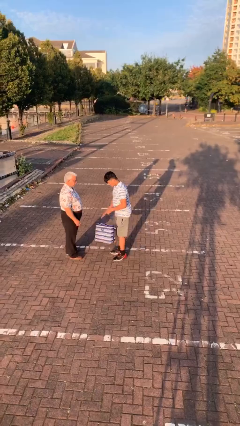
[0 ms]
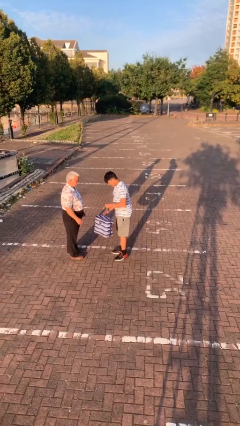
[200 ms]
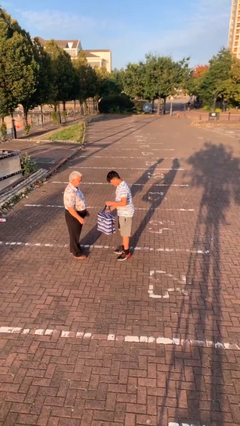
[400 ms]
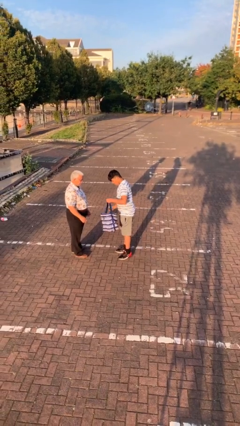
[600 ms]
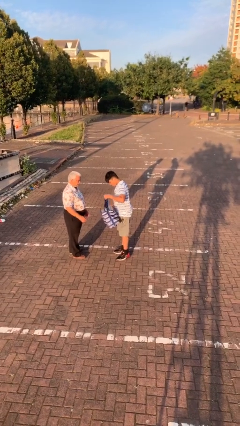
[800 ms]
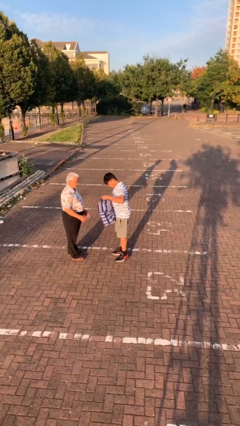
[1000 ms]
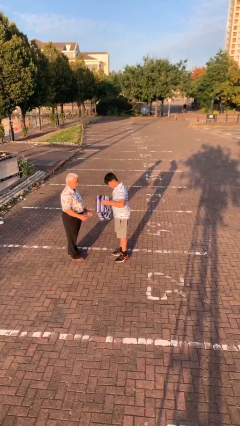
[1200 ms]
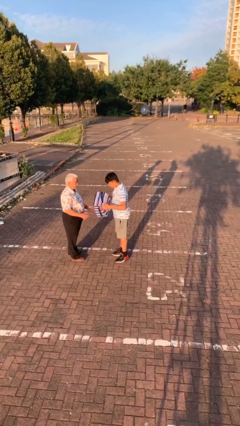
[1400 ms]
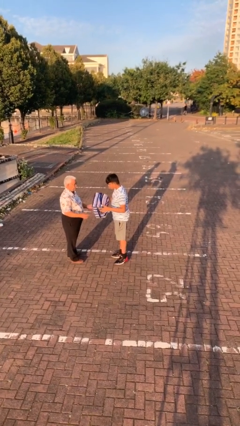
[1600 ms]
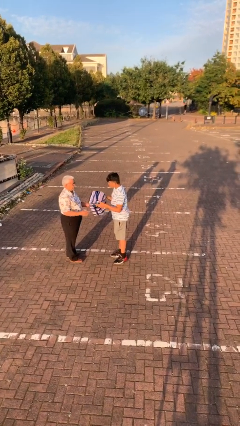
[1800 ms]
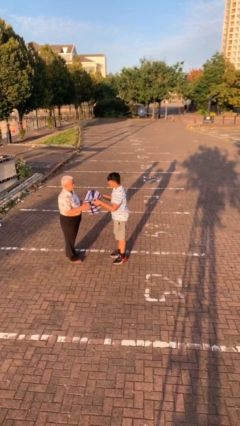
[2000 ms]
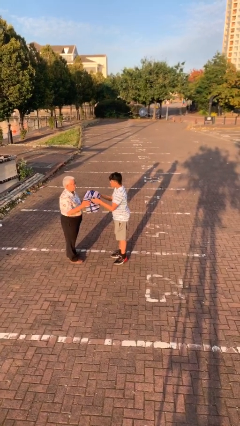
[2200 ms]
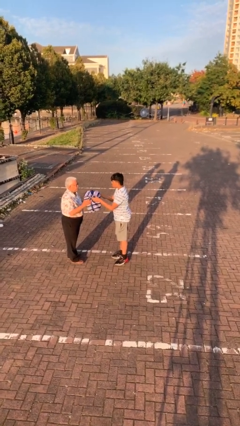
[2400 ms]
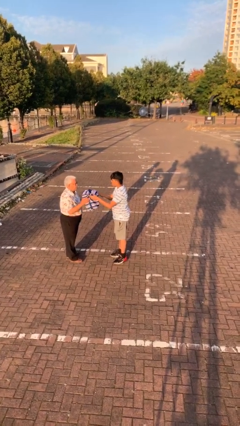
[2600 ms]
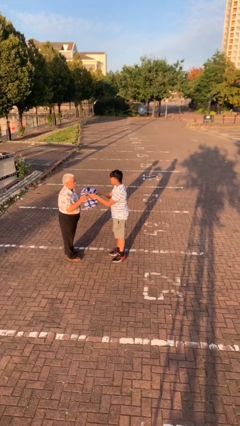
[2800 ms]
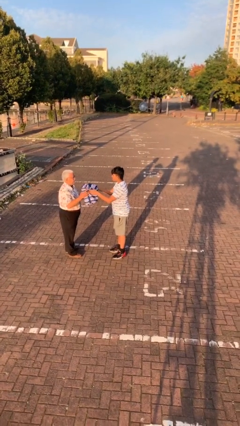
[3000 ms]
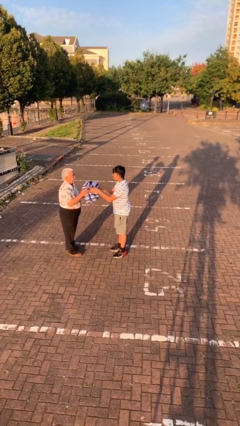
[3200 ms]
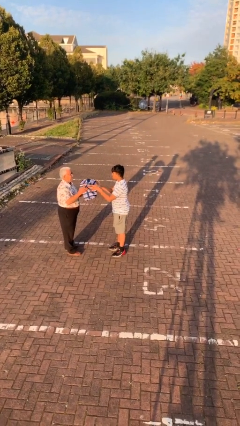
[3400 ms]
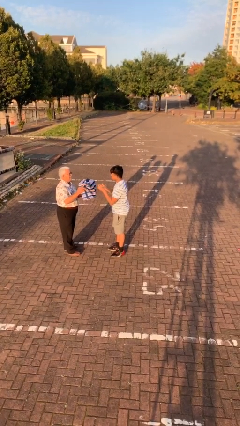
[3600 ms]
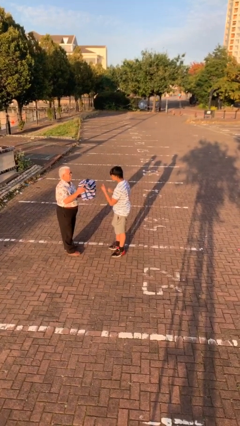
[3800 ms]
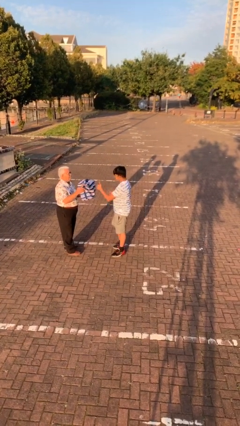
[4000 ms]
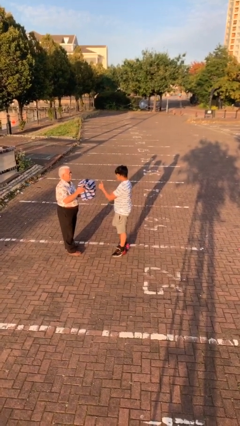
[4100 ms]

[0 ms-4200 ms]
person transfers object to person

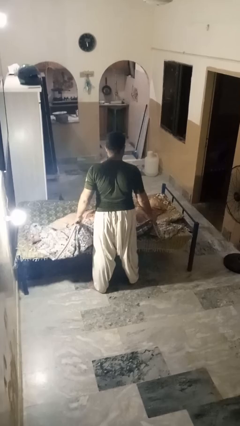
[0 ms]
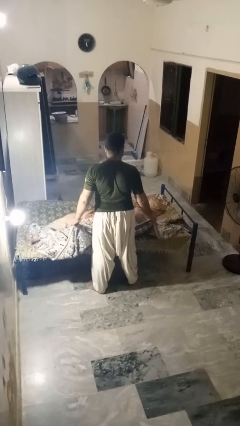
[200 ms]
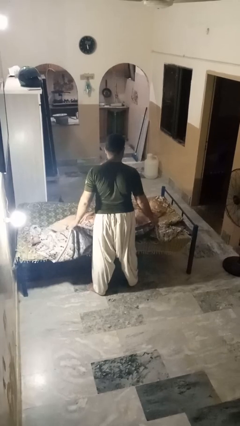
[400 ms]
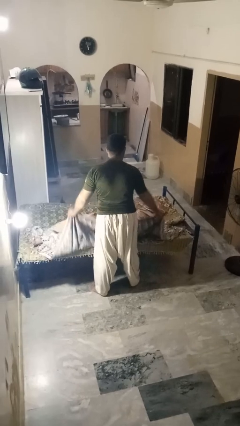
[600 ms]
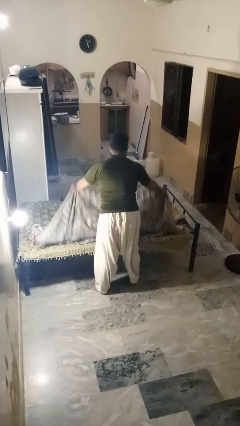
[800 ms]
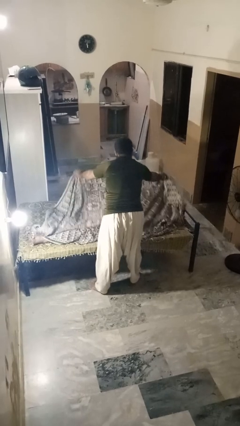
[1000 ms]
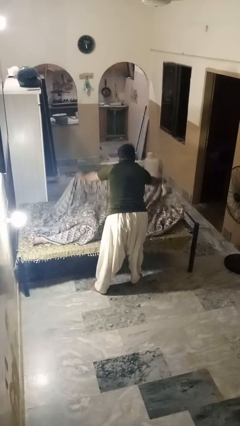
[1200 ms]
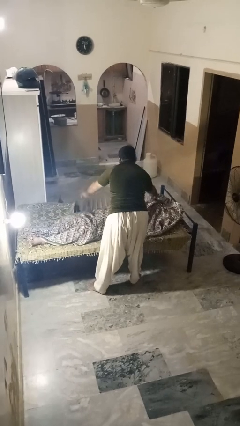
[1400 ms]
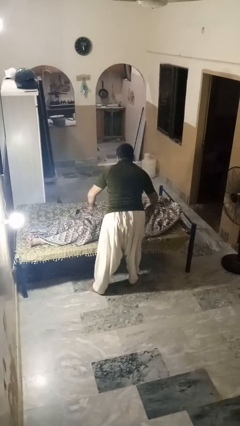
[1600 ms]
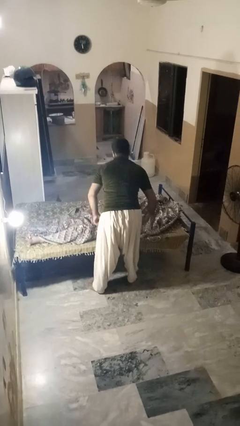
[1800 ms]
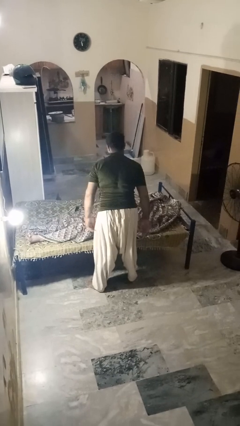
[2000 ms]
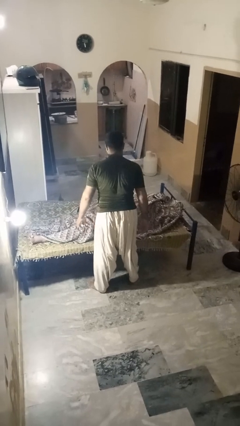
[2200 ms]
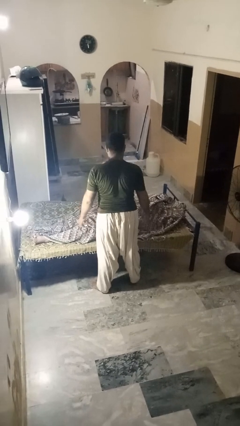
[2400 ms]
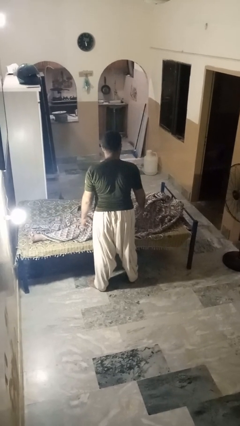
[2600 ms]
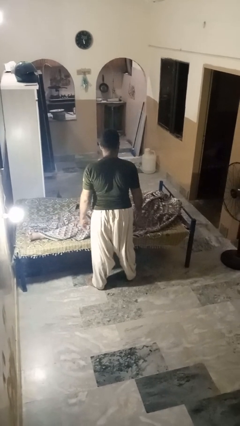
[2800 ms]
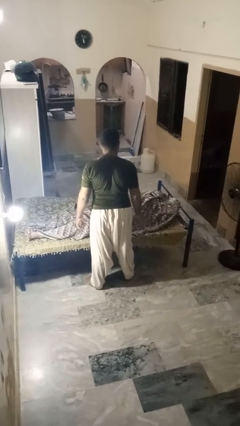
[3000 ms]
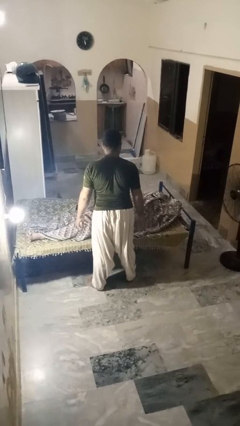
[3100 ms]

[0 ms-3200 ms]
person covers friend with blanket

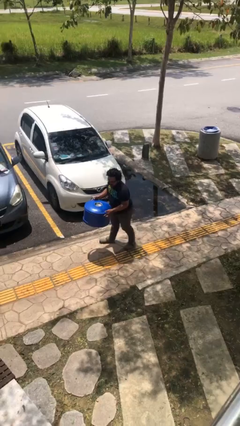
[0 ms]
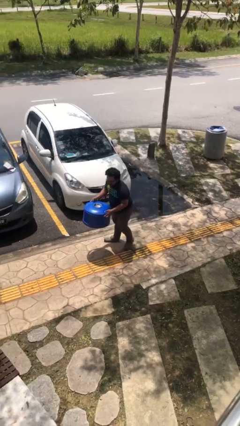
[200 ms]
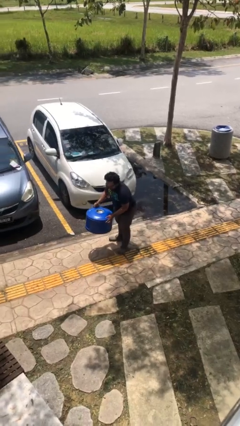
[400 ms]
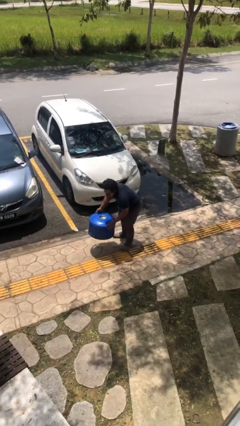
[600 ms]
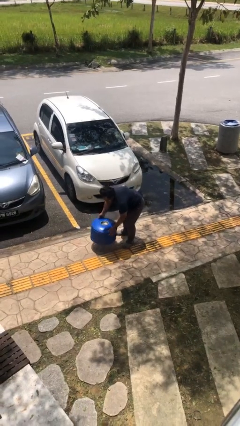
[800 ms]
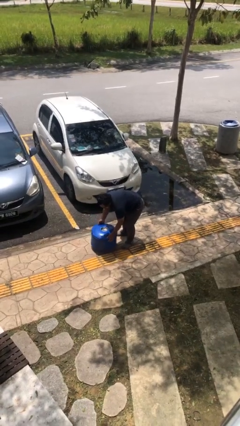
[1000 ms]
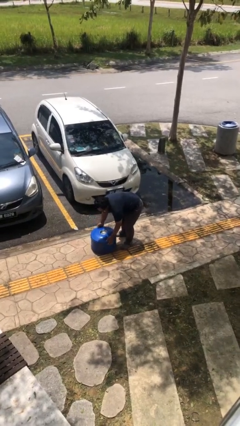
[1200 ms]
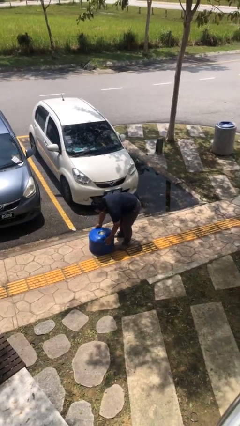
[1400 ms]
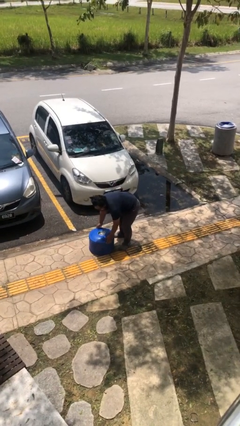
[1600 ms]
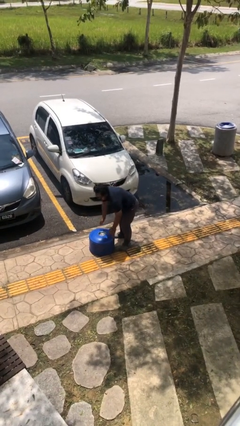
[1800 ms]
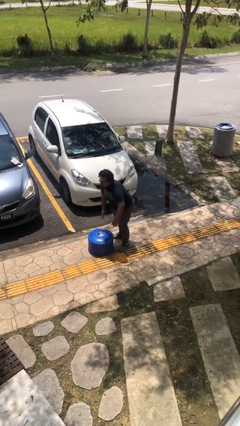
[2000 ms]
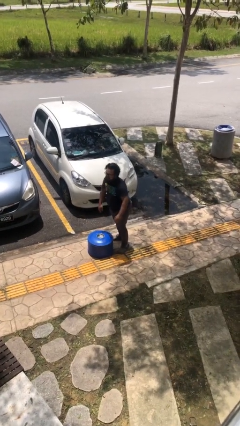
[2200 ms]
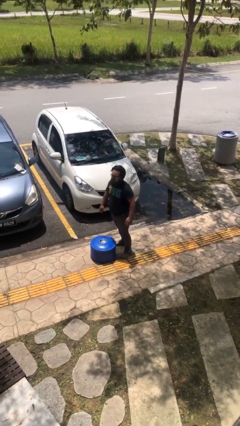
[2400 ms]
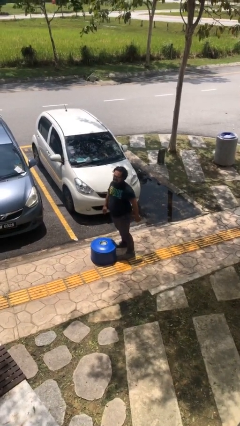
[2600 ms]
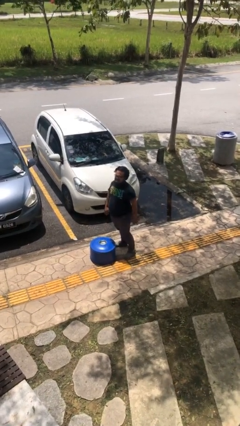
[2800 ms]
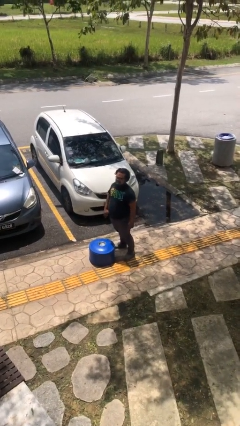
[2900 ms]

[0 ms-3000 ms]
person puts down object on floor

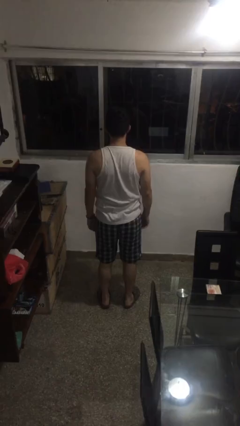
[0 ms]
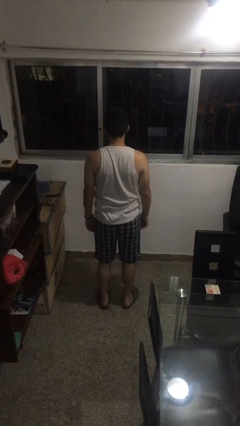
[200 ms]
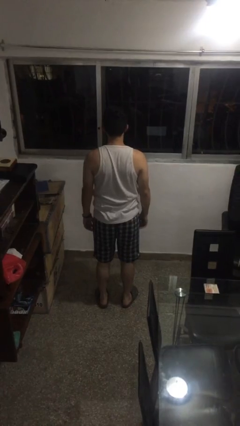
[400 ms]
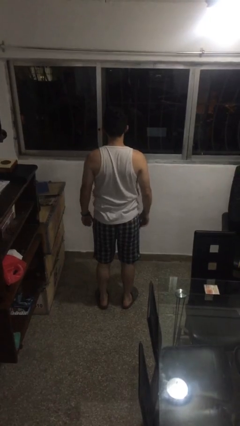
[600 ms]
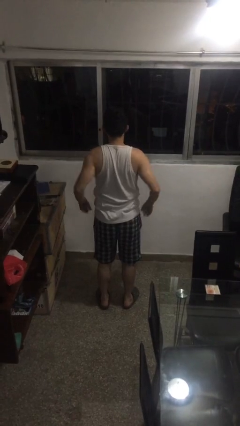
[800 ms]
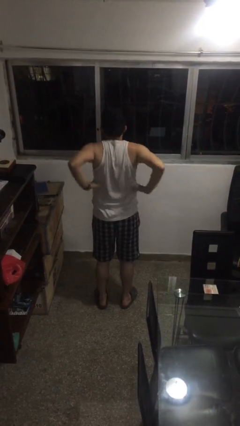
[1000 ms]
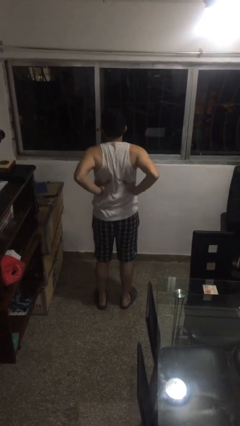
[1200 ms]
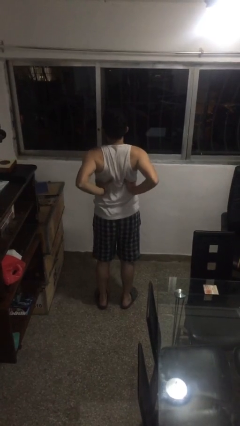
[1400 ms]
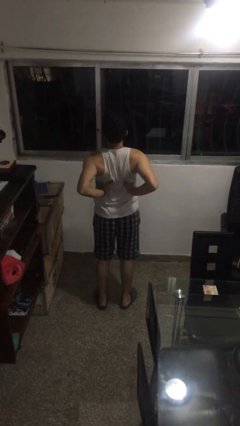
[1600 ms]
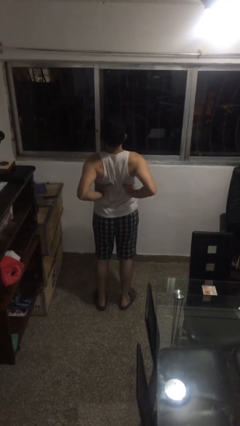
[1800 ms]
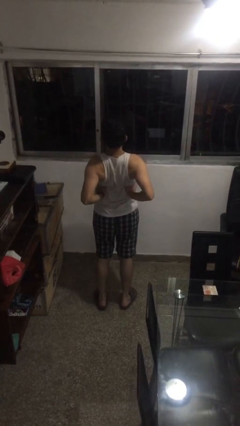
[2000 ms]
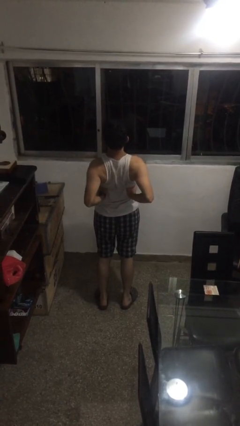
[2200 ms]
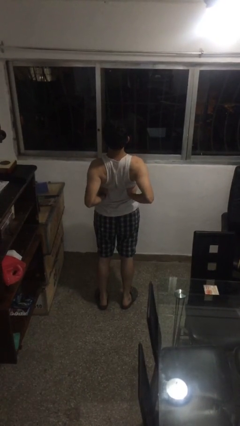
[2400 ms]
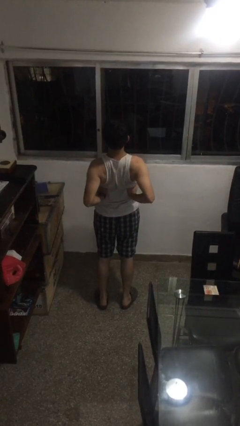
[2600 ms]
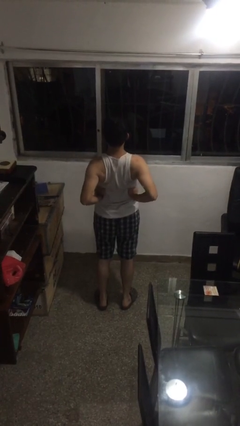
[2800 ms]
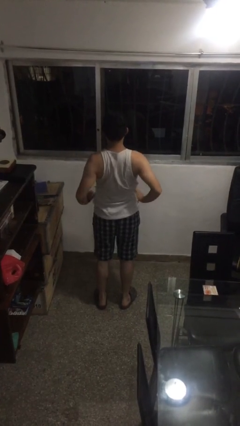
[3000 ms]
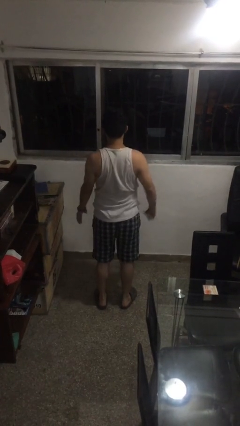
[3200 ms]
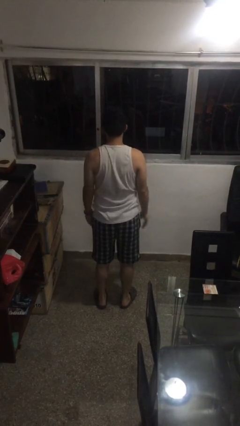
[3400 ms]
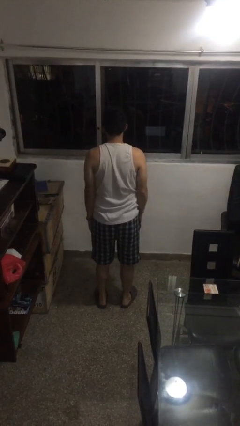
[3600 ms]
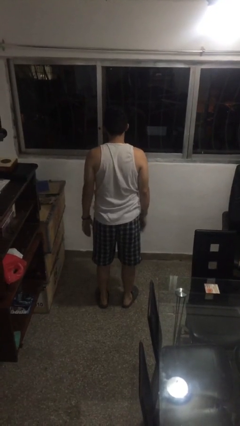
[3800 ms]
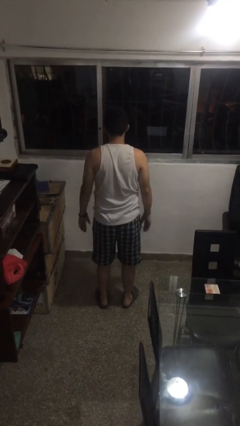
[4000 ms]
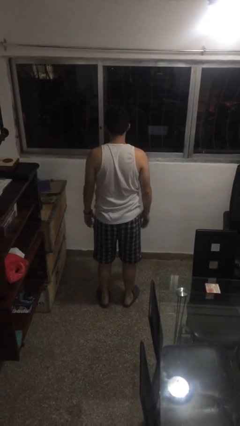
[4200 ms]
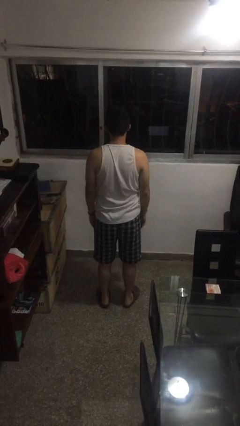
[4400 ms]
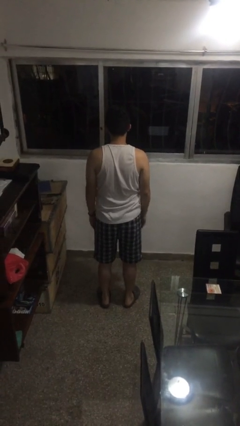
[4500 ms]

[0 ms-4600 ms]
person stretches back

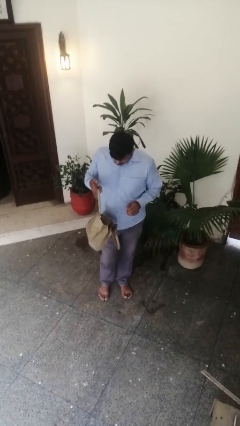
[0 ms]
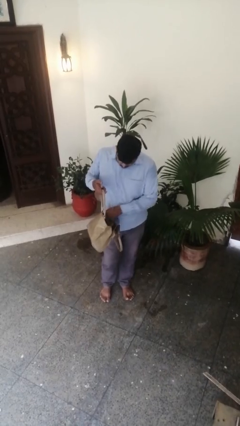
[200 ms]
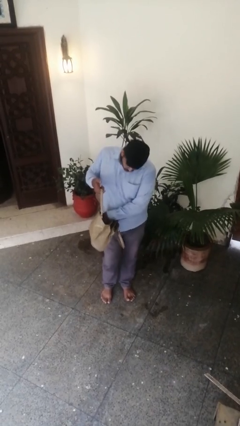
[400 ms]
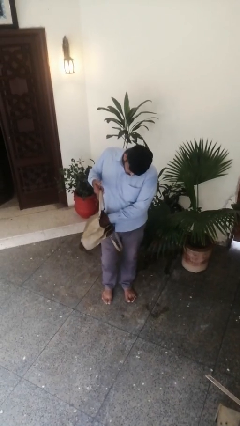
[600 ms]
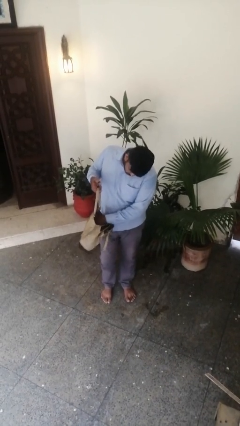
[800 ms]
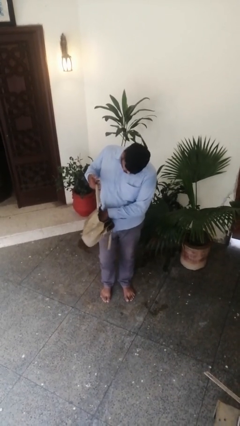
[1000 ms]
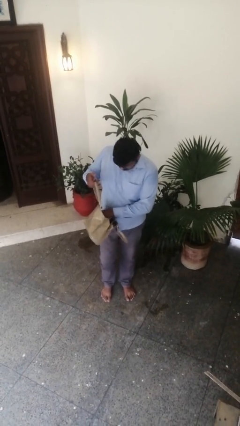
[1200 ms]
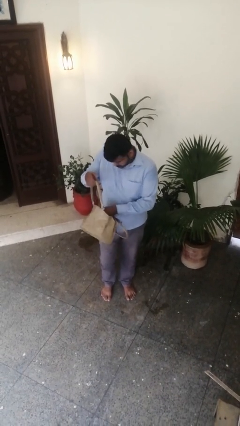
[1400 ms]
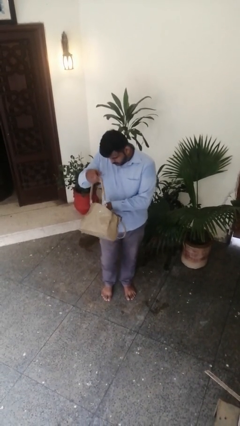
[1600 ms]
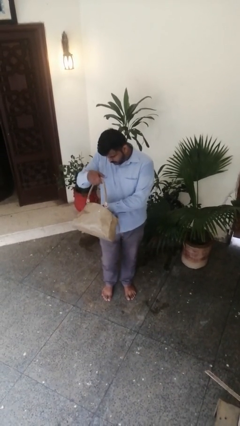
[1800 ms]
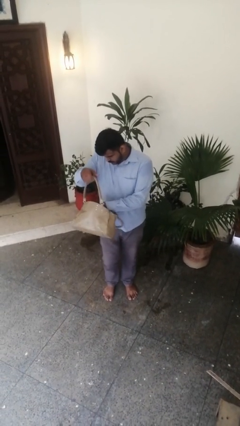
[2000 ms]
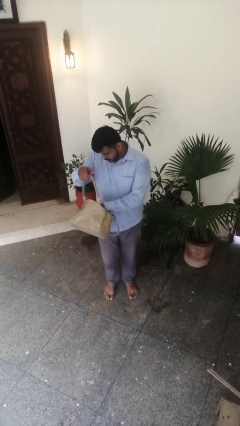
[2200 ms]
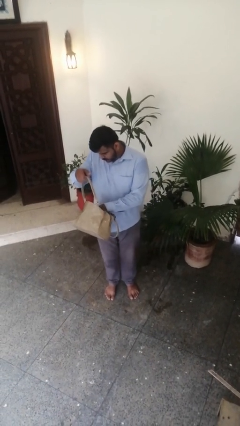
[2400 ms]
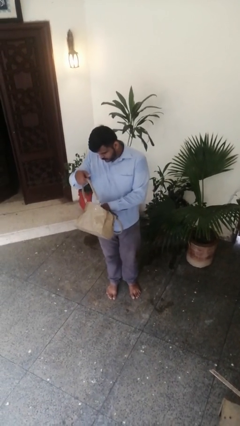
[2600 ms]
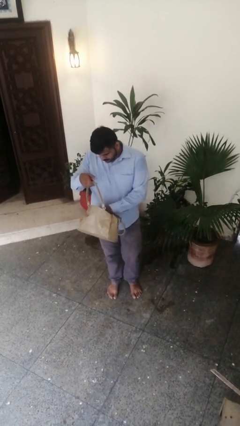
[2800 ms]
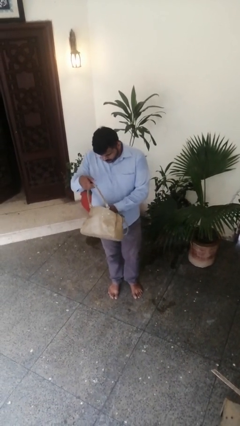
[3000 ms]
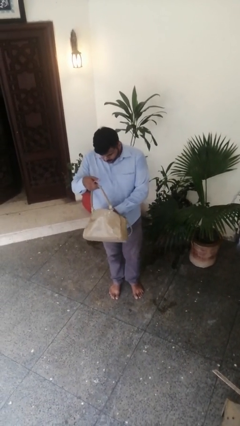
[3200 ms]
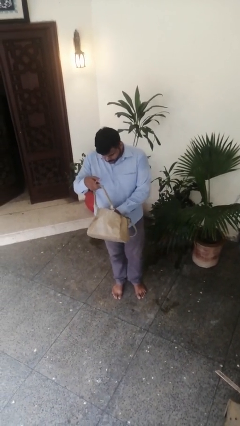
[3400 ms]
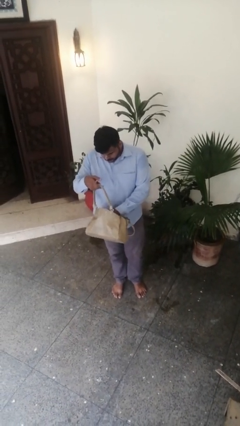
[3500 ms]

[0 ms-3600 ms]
person searches in purse
